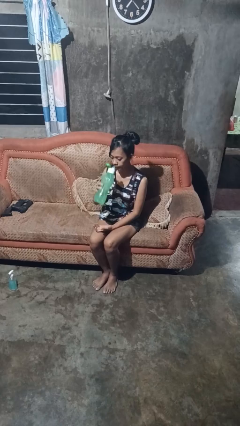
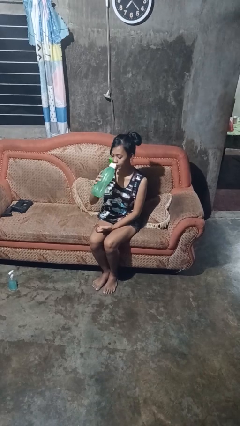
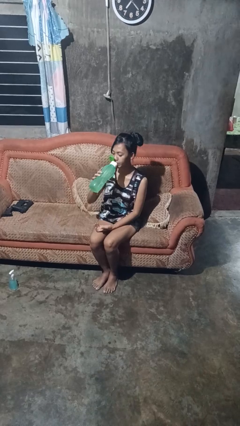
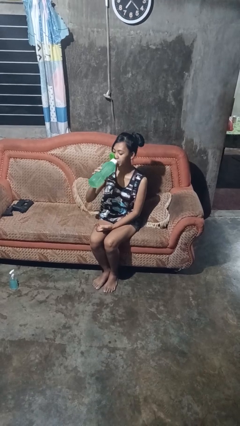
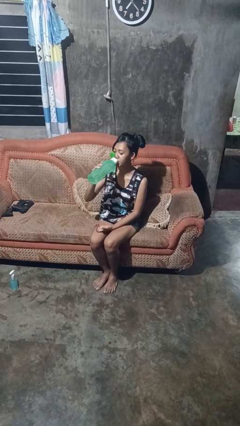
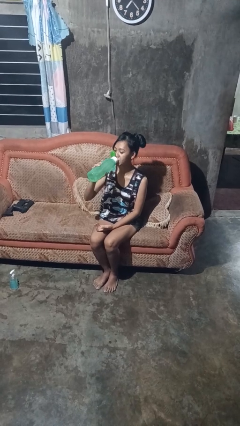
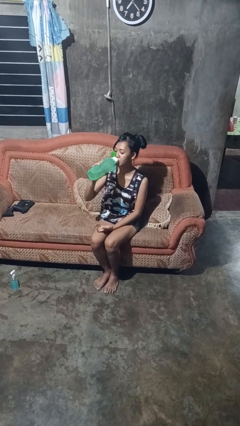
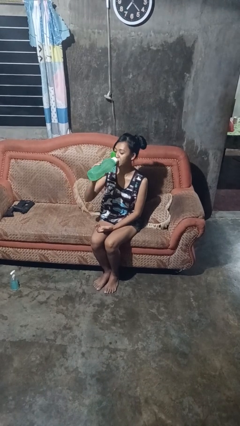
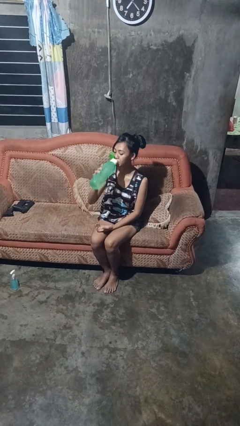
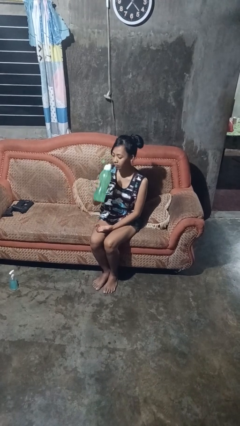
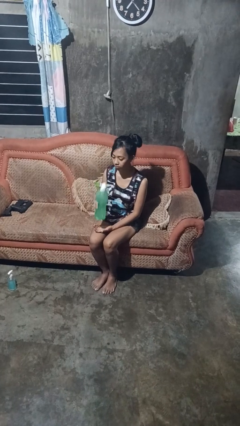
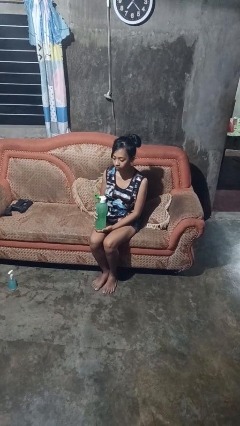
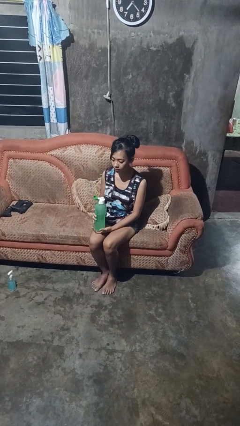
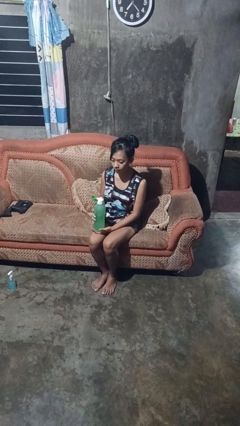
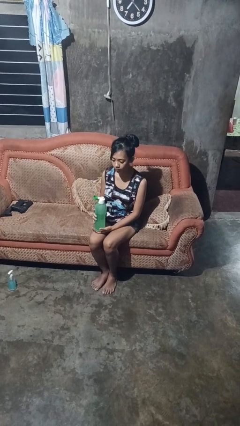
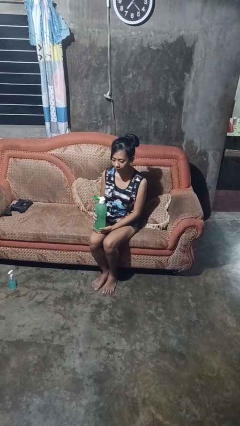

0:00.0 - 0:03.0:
person drinks from bottle

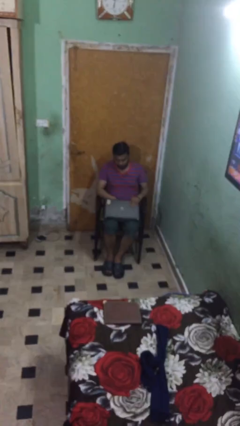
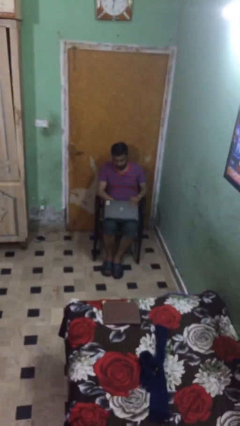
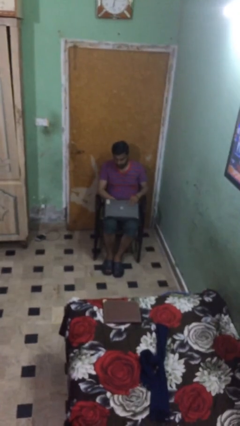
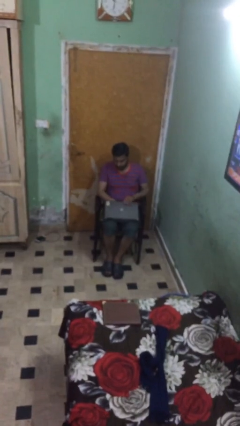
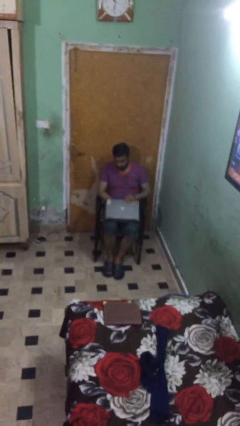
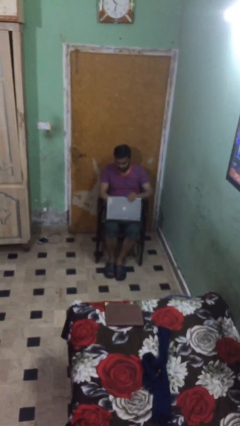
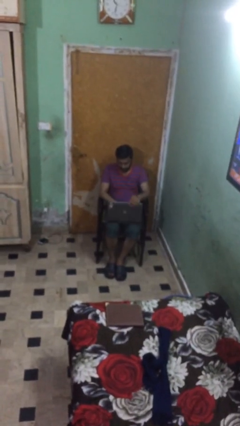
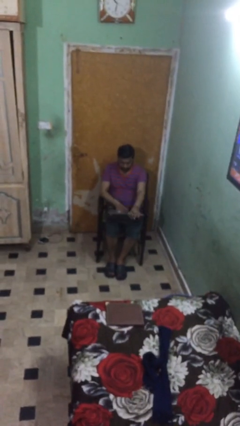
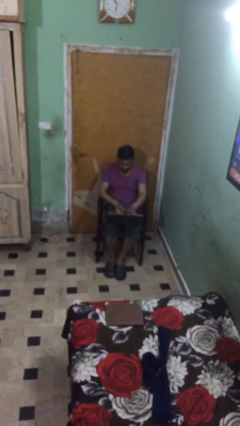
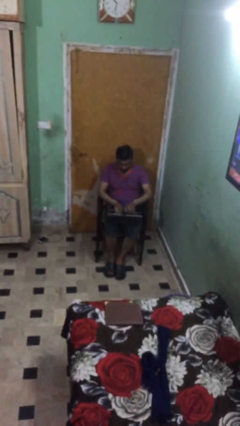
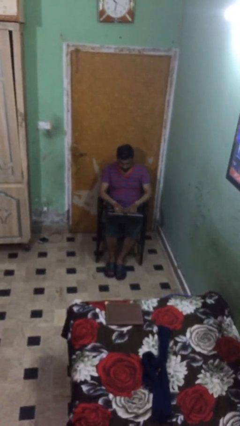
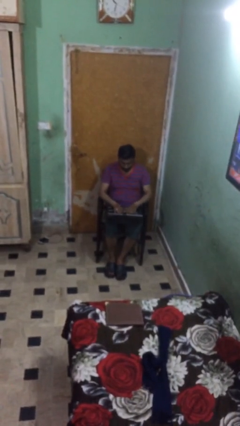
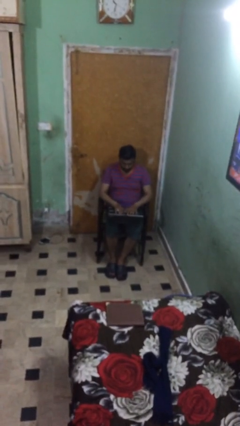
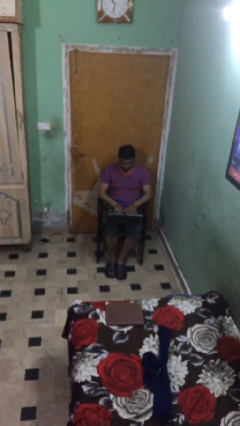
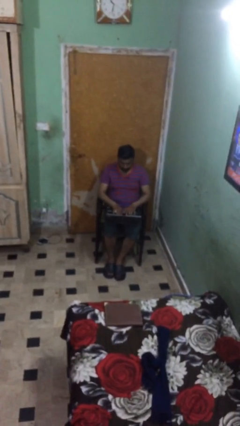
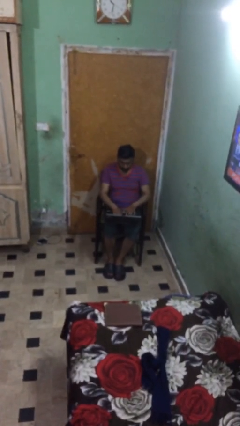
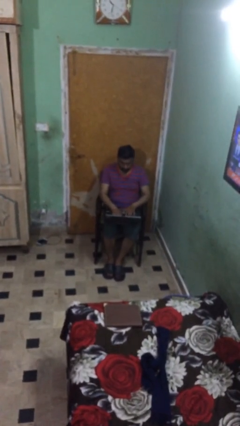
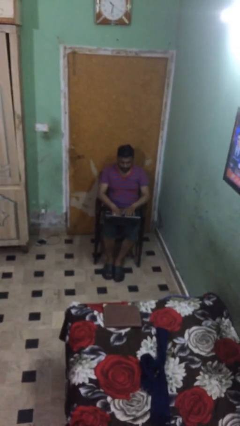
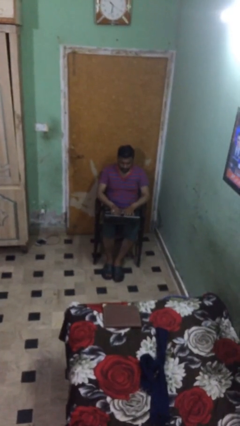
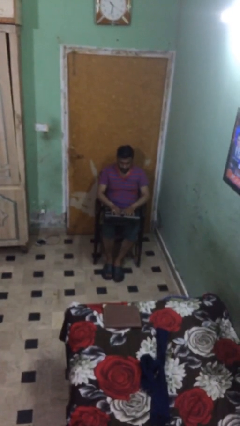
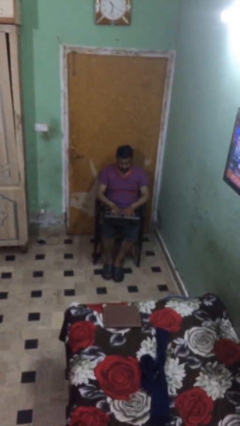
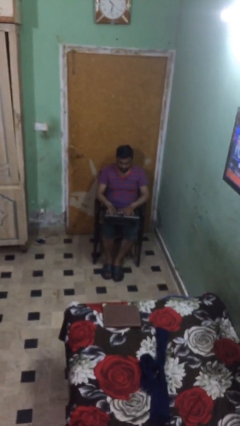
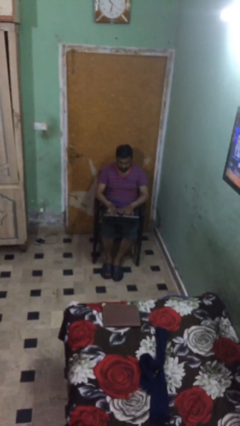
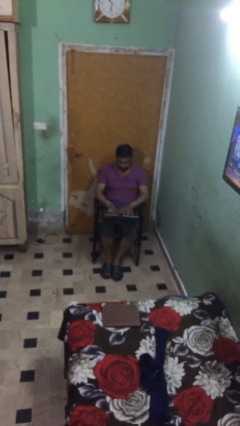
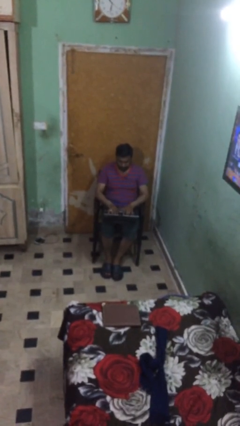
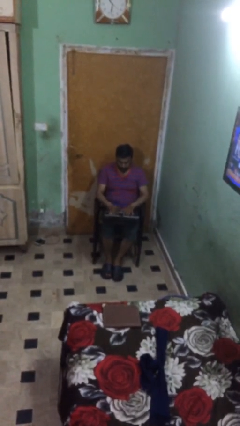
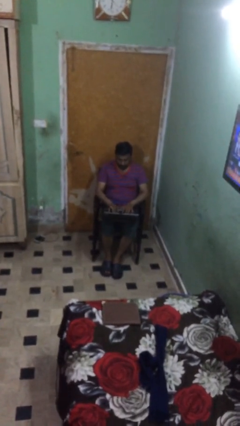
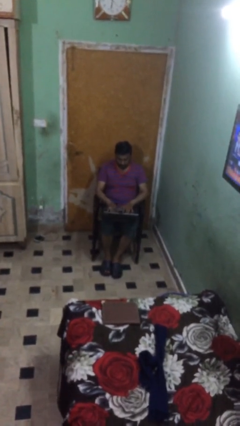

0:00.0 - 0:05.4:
person interacts with laptop

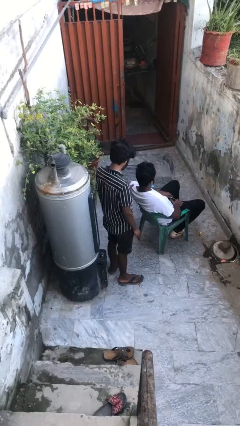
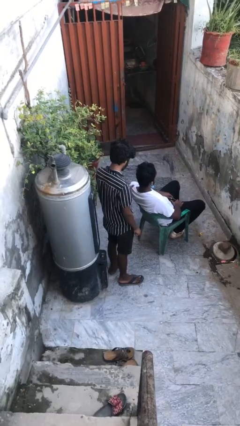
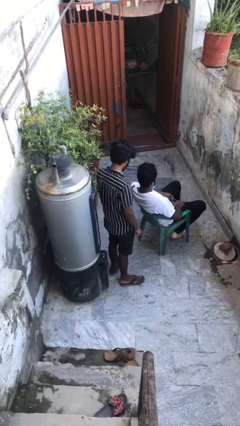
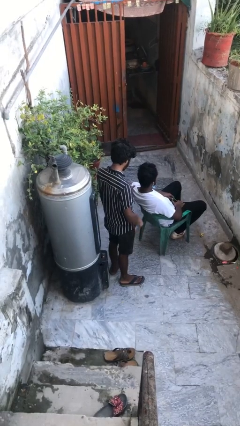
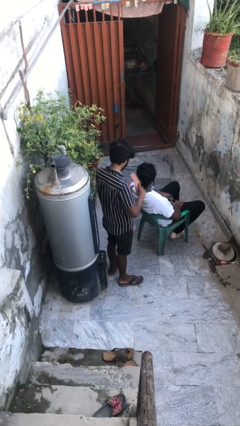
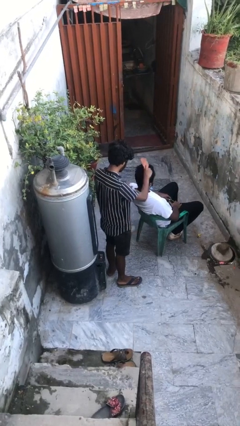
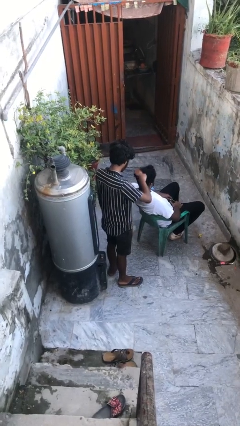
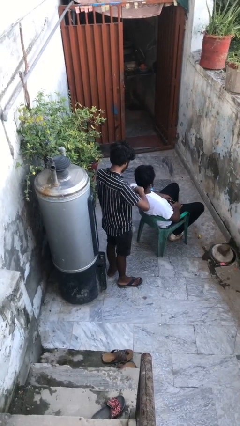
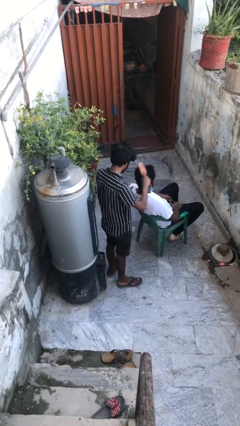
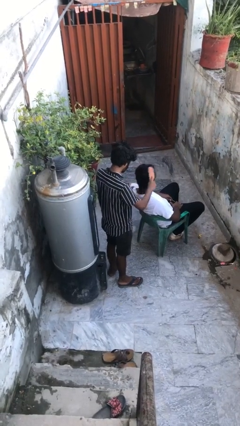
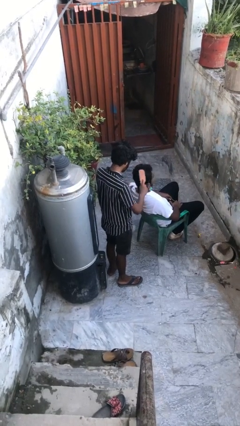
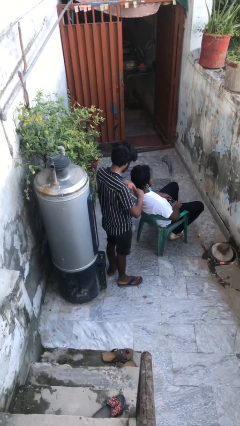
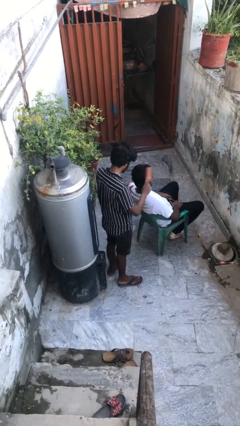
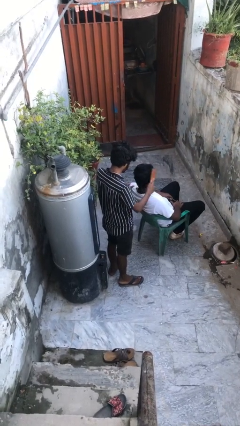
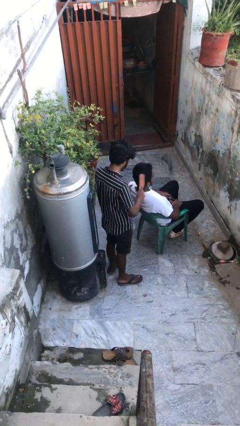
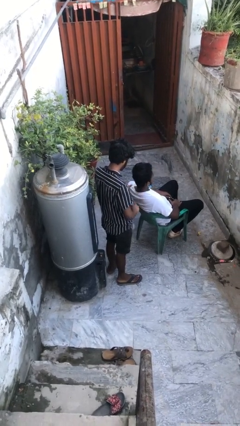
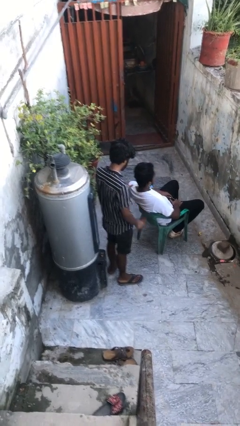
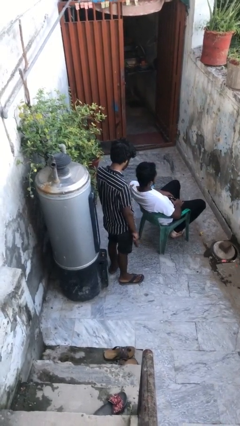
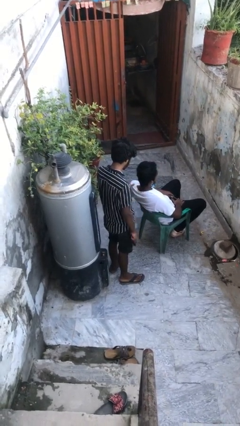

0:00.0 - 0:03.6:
person brushes hair of person

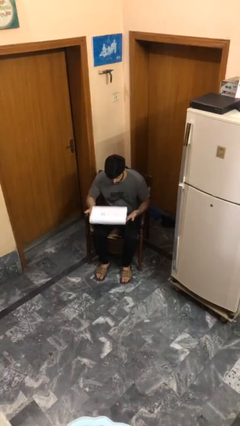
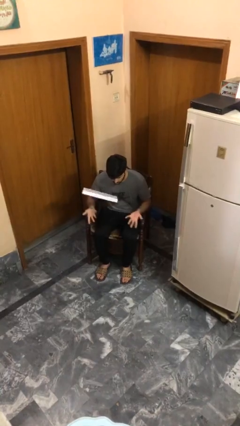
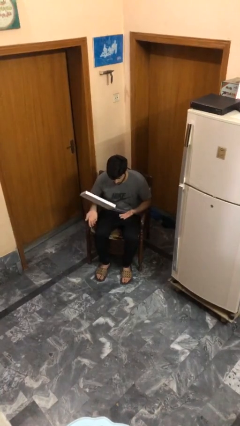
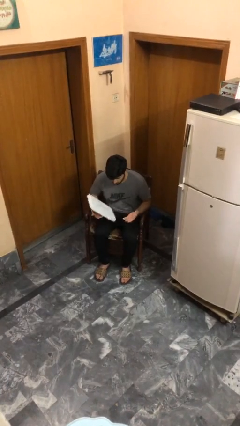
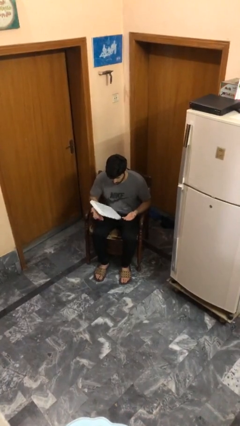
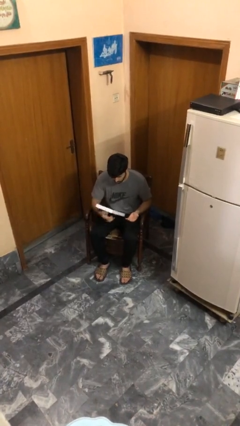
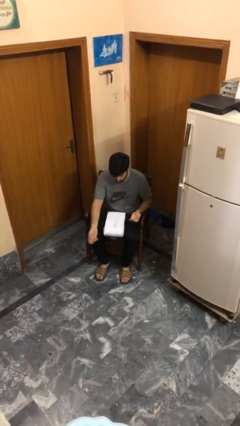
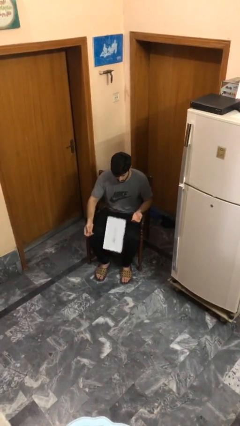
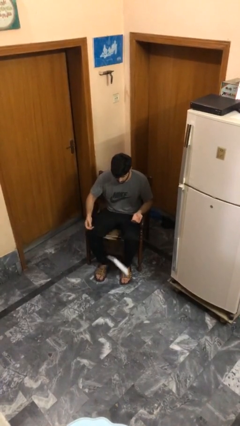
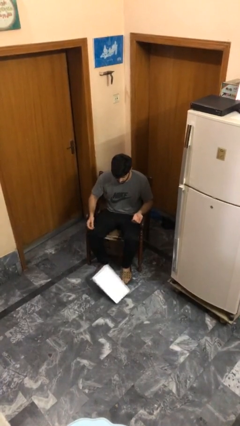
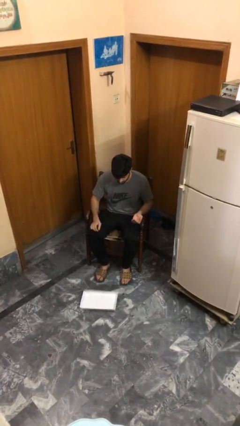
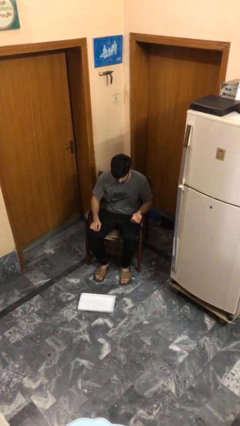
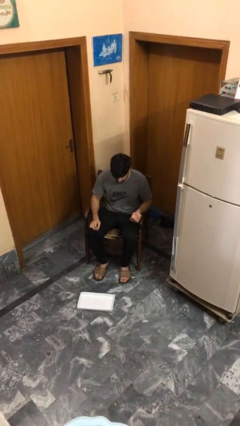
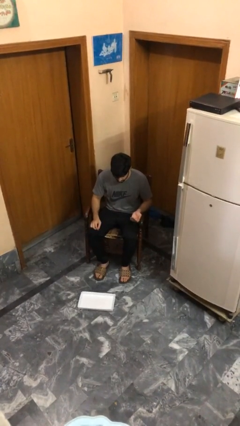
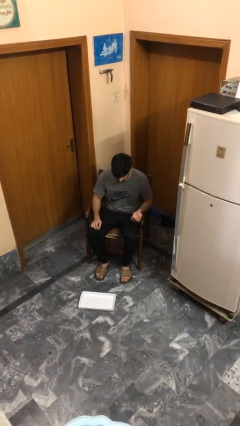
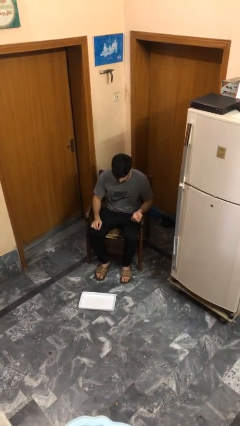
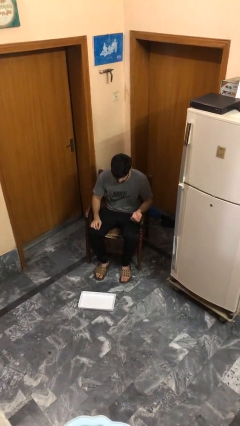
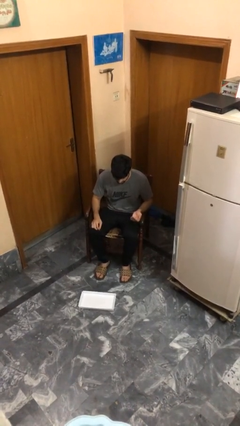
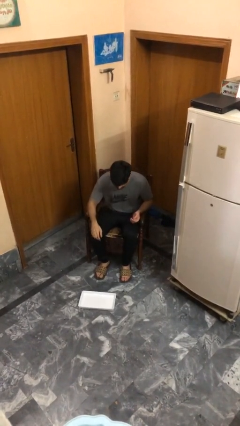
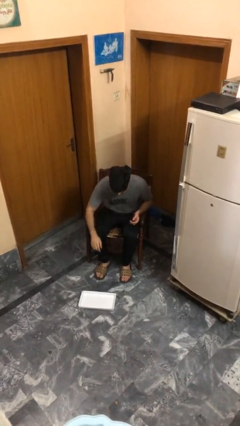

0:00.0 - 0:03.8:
person drops object

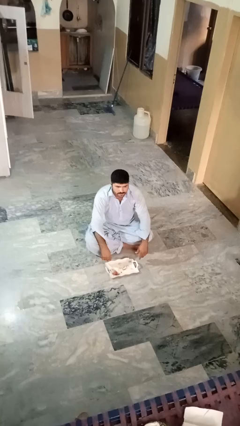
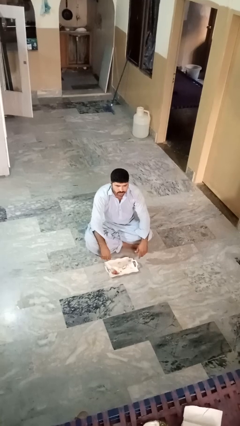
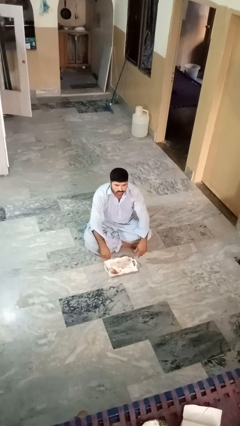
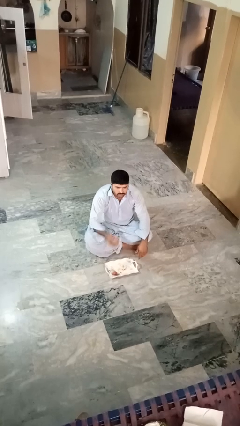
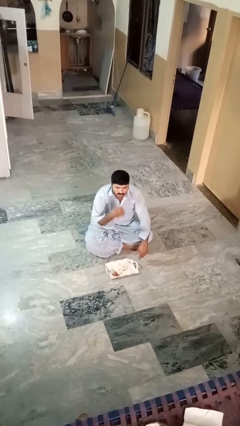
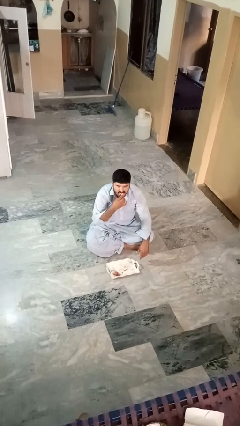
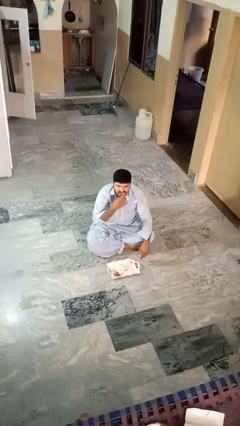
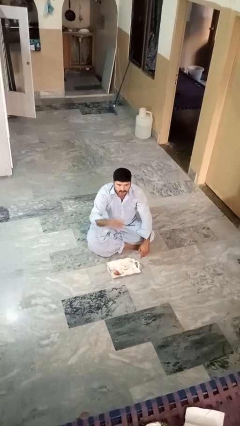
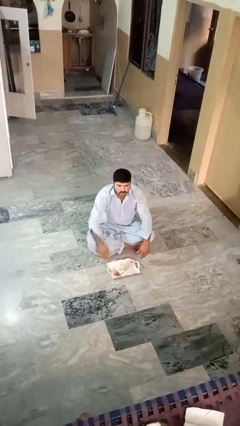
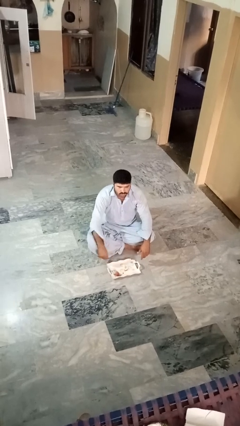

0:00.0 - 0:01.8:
person eats apple
